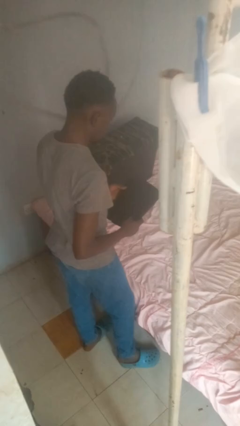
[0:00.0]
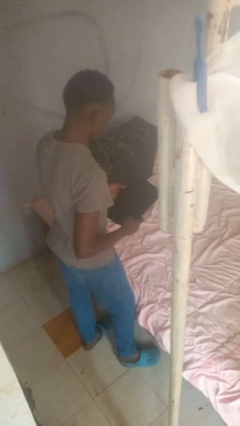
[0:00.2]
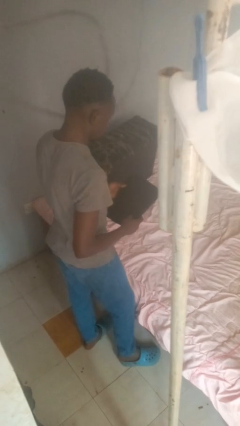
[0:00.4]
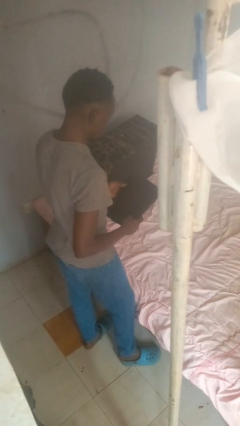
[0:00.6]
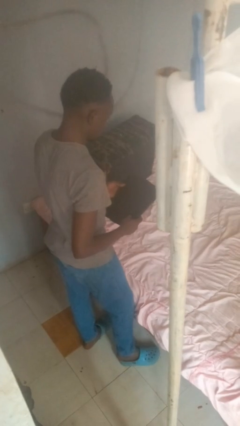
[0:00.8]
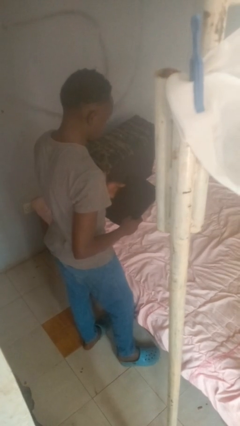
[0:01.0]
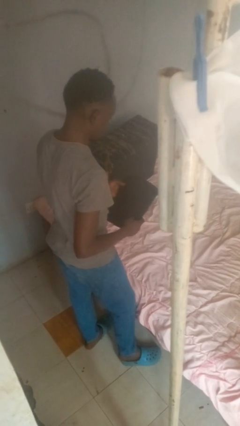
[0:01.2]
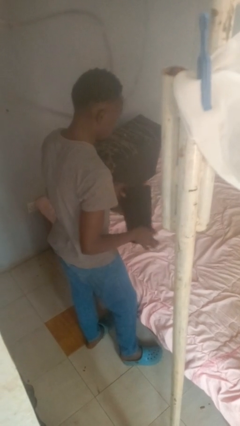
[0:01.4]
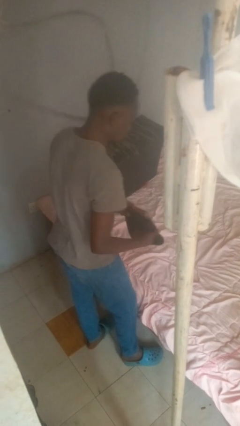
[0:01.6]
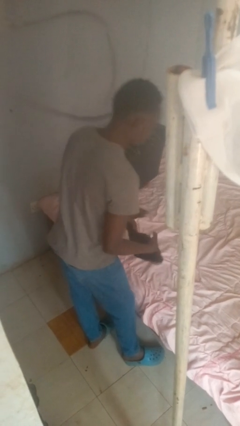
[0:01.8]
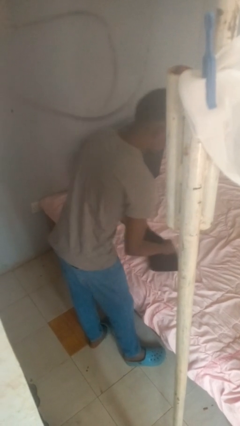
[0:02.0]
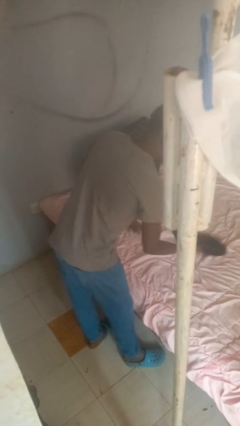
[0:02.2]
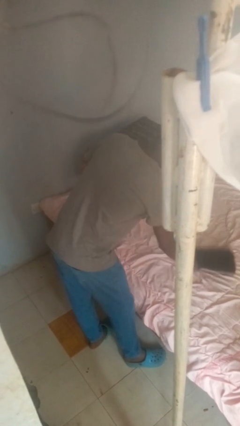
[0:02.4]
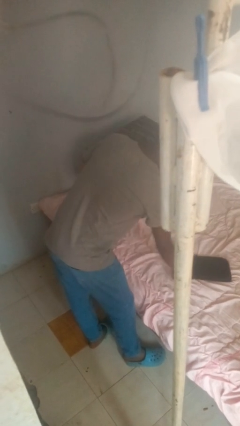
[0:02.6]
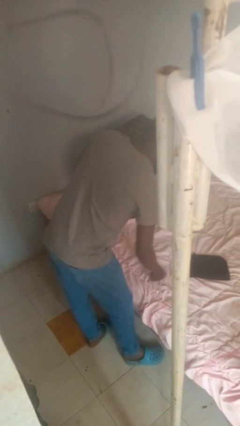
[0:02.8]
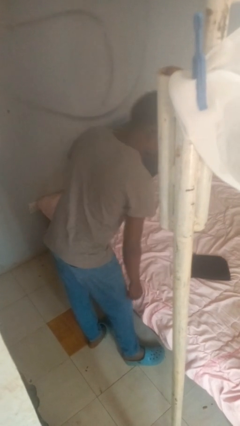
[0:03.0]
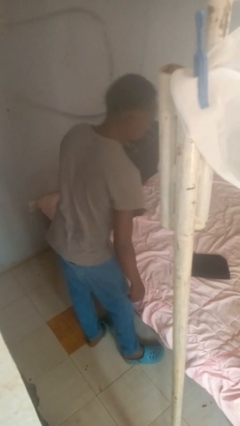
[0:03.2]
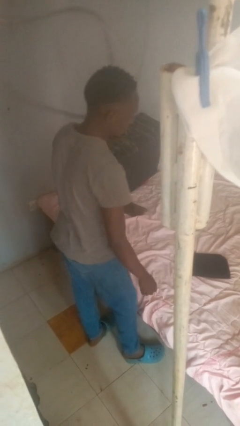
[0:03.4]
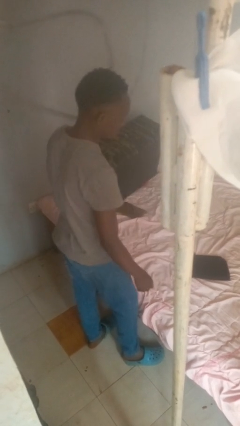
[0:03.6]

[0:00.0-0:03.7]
person puts down object on bed

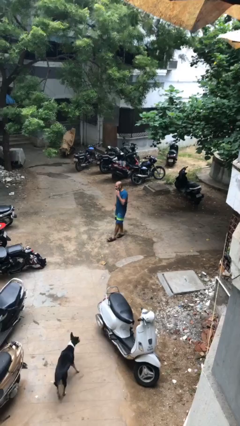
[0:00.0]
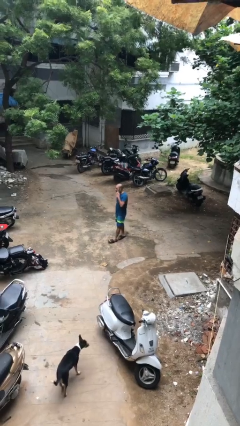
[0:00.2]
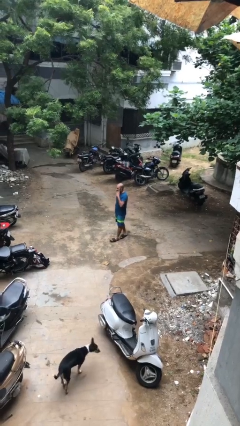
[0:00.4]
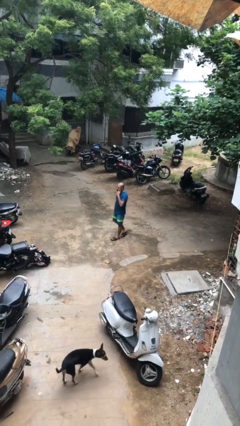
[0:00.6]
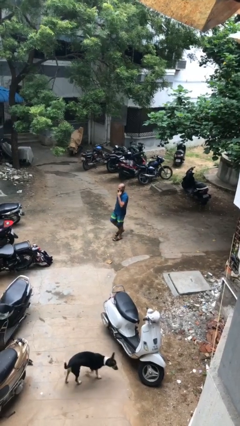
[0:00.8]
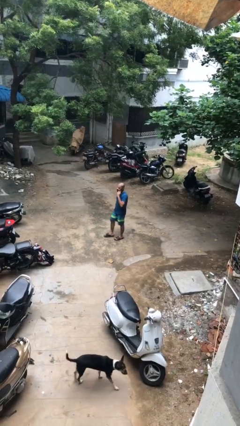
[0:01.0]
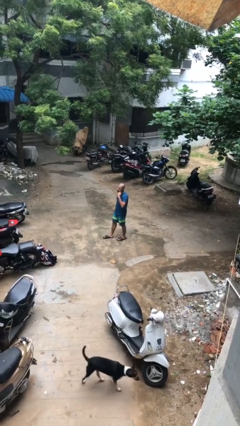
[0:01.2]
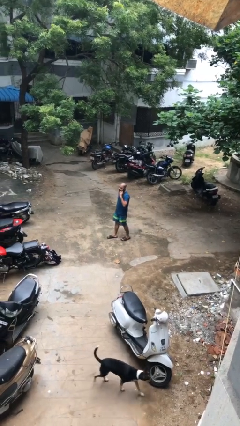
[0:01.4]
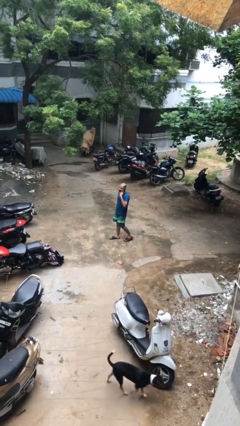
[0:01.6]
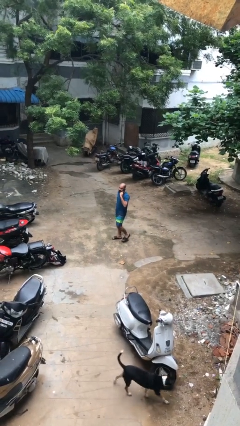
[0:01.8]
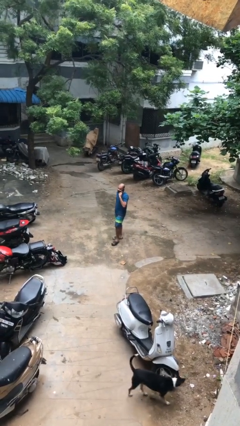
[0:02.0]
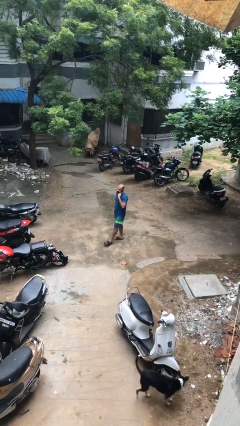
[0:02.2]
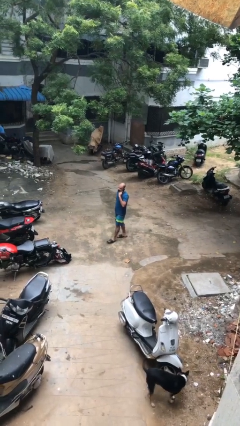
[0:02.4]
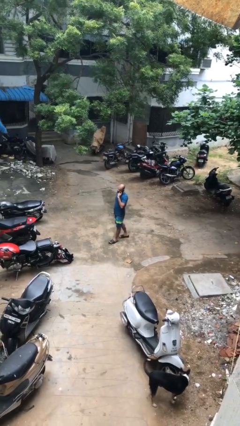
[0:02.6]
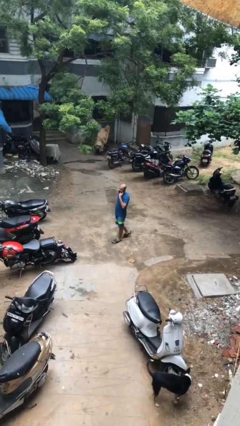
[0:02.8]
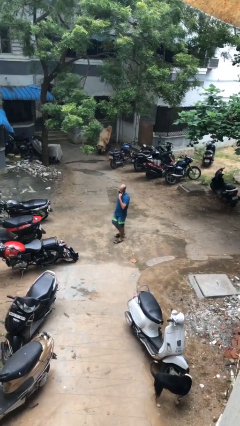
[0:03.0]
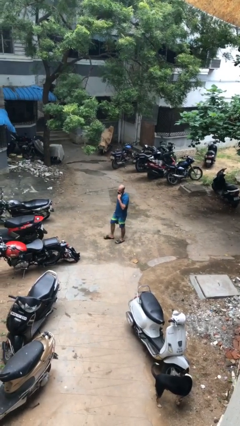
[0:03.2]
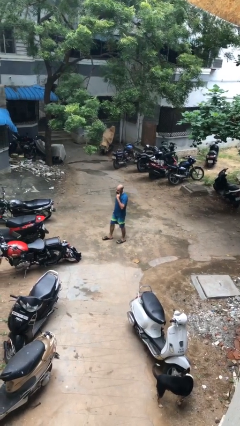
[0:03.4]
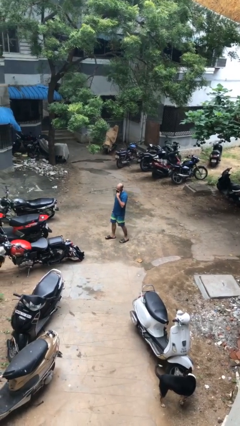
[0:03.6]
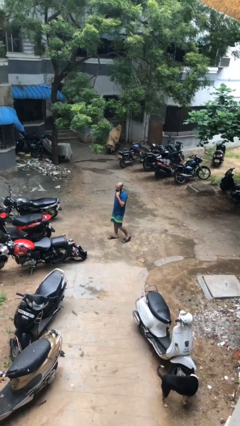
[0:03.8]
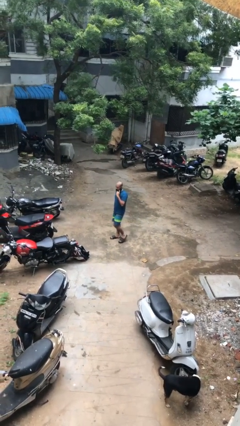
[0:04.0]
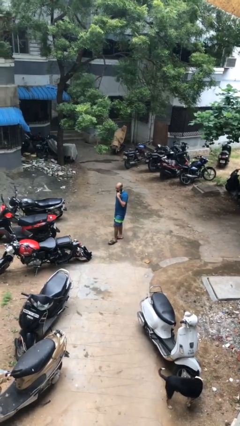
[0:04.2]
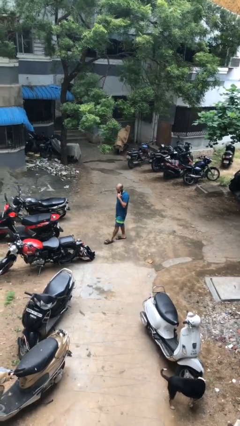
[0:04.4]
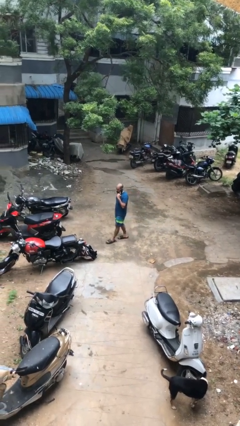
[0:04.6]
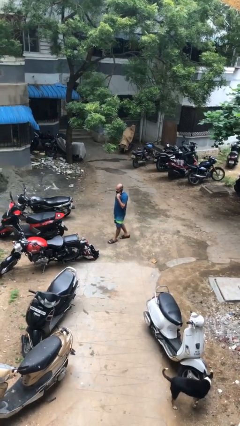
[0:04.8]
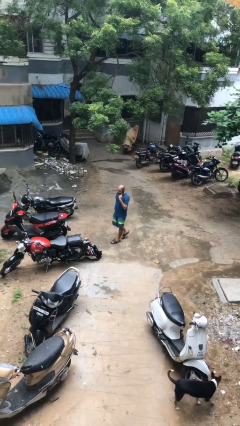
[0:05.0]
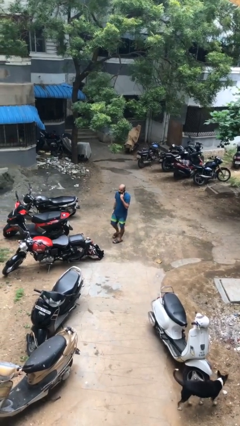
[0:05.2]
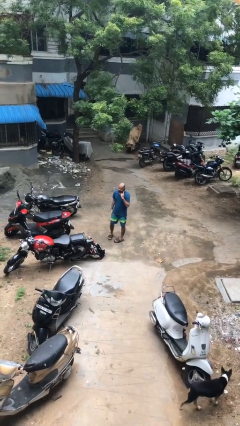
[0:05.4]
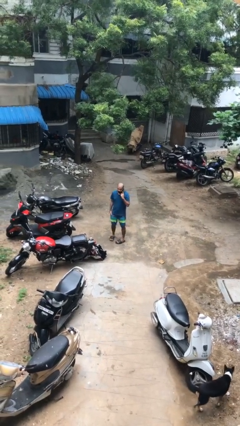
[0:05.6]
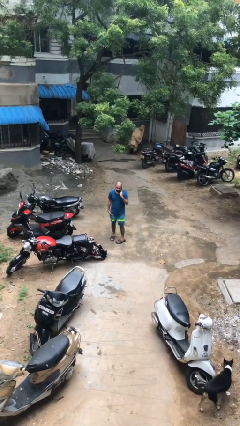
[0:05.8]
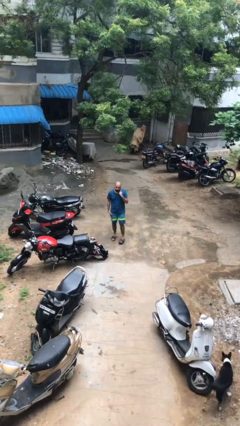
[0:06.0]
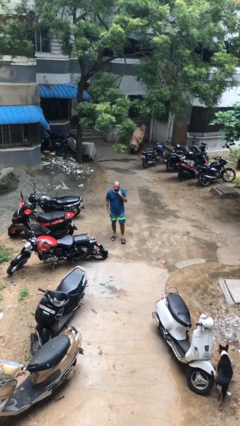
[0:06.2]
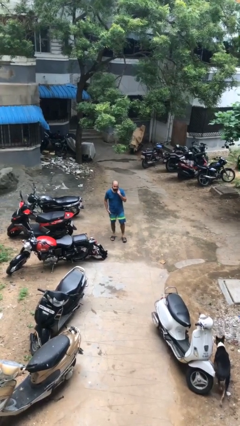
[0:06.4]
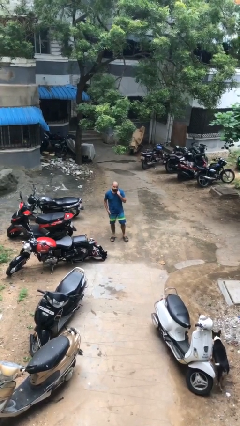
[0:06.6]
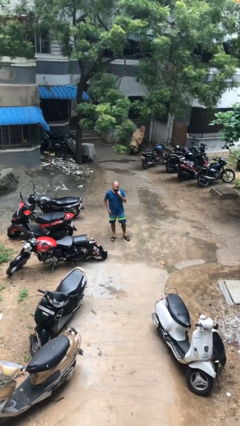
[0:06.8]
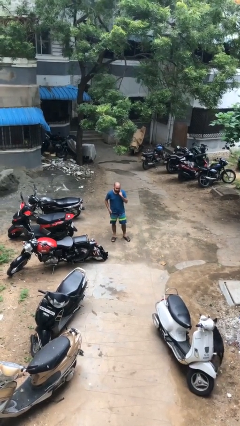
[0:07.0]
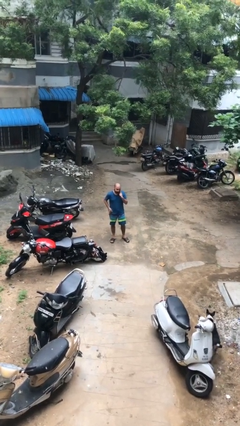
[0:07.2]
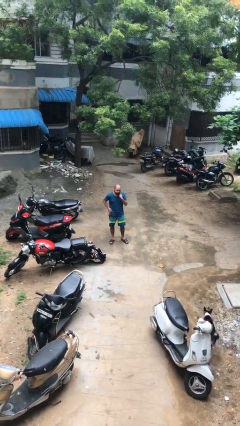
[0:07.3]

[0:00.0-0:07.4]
person talks on phone

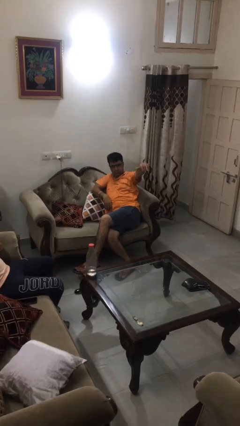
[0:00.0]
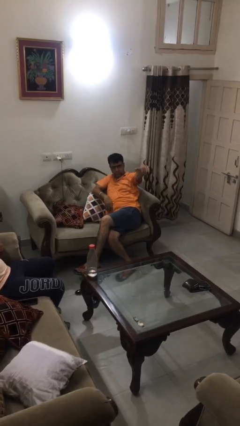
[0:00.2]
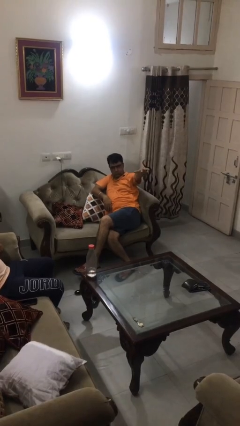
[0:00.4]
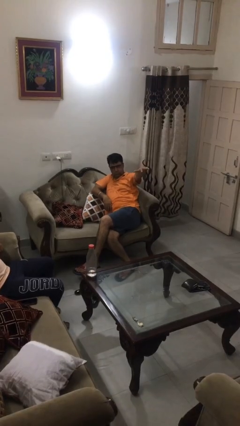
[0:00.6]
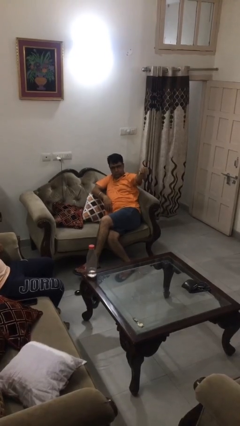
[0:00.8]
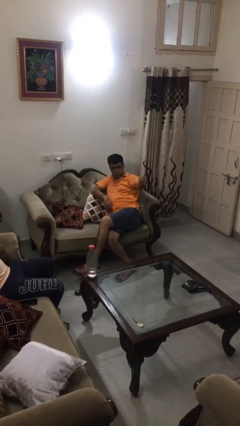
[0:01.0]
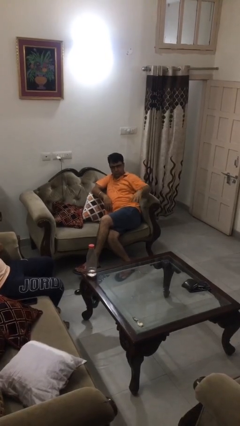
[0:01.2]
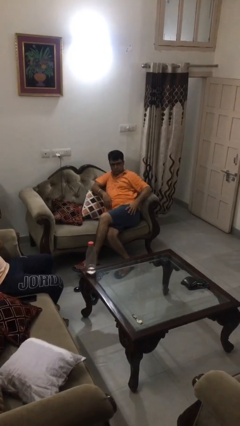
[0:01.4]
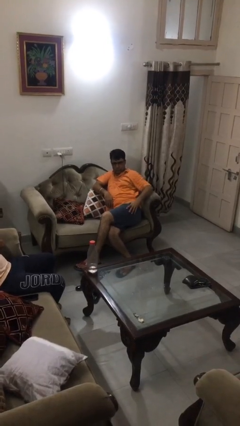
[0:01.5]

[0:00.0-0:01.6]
person gestures come here

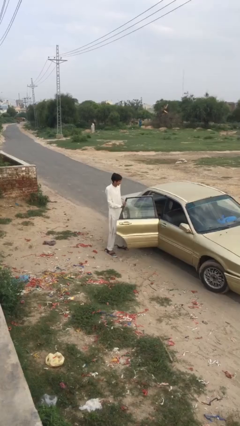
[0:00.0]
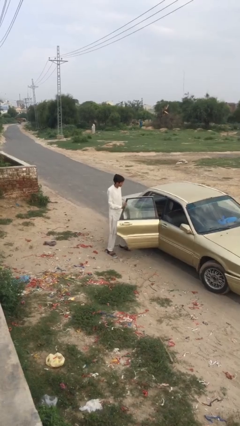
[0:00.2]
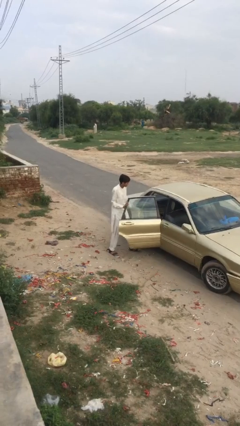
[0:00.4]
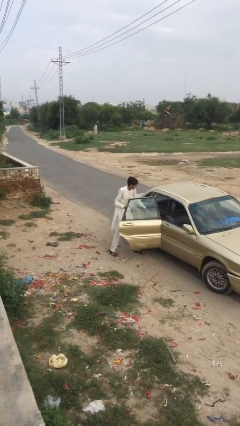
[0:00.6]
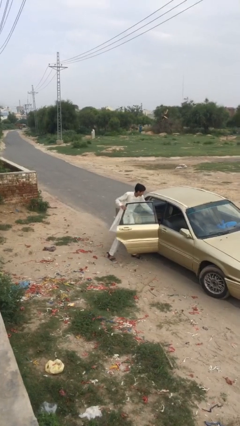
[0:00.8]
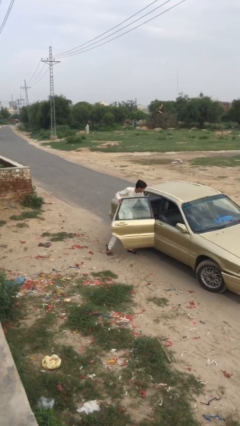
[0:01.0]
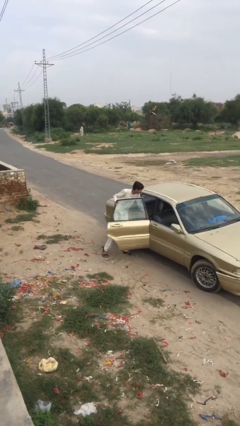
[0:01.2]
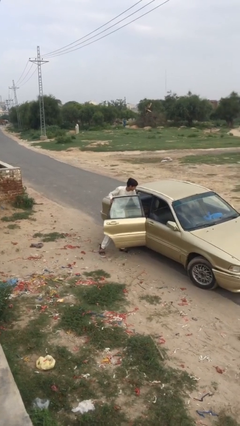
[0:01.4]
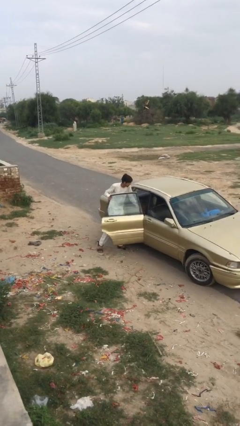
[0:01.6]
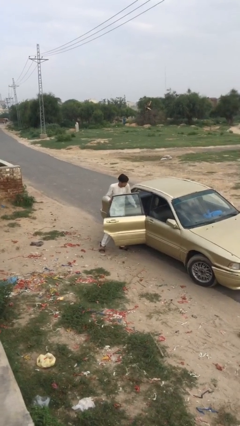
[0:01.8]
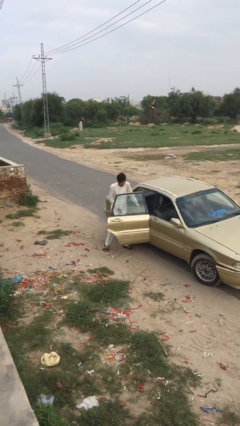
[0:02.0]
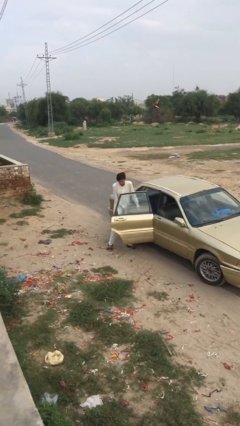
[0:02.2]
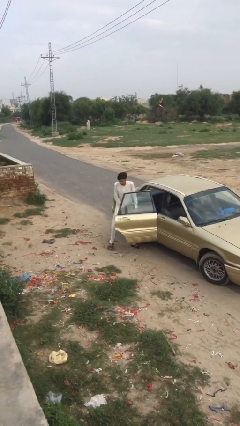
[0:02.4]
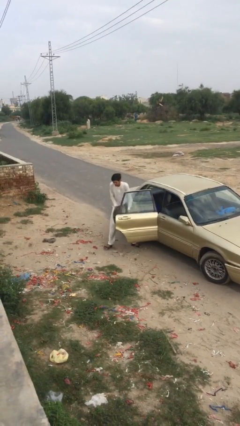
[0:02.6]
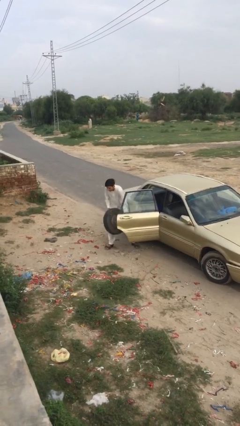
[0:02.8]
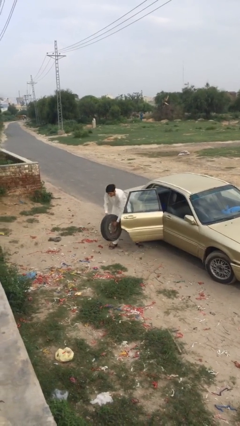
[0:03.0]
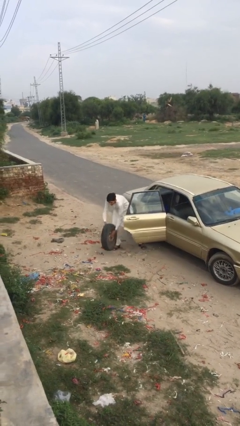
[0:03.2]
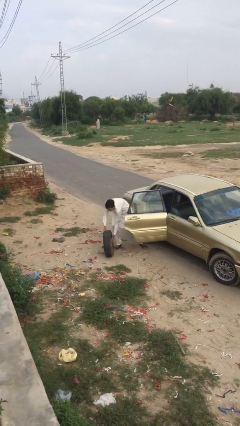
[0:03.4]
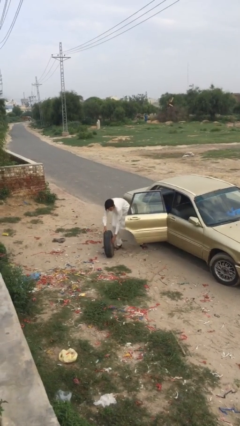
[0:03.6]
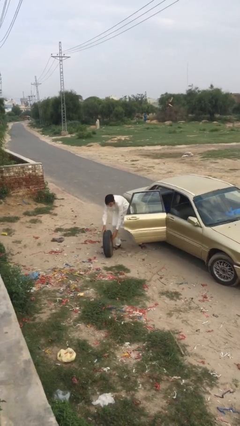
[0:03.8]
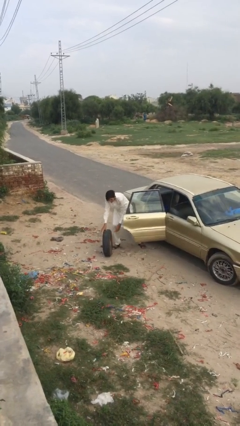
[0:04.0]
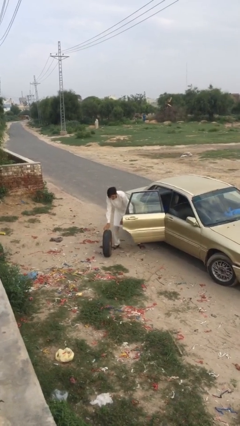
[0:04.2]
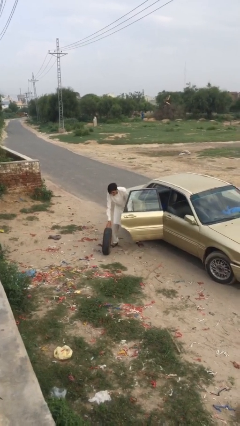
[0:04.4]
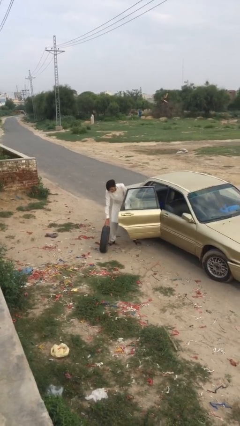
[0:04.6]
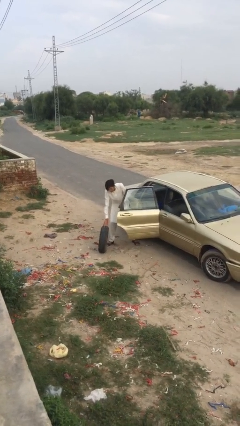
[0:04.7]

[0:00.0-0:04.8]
person unloads car

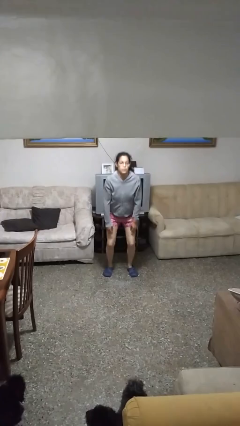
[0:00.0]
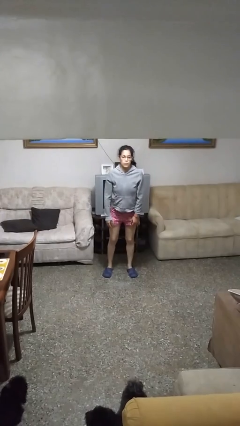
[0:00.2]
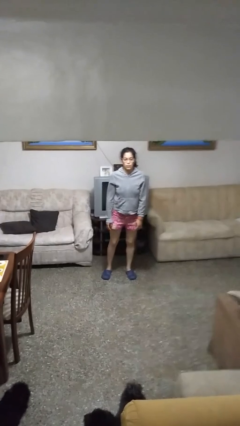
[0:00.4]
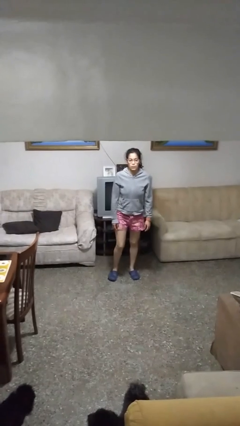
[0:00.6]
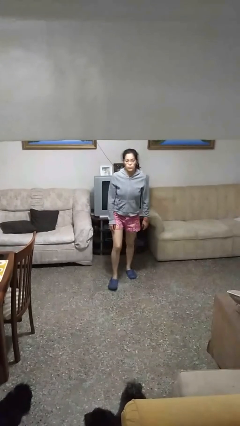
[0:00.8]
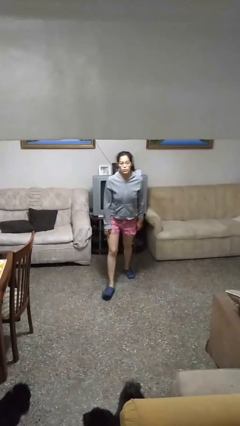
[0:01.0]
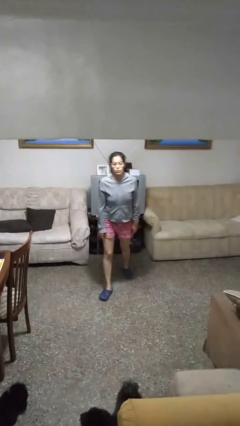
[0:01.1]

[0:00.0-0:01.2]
person stands up
